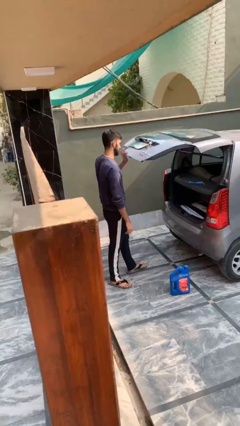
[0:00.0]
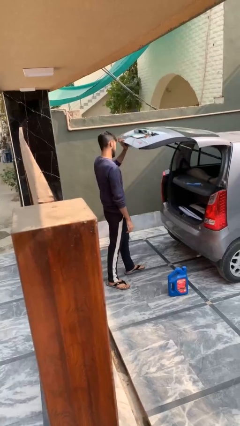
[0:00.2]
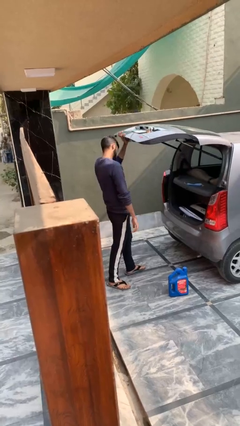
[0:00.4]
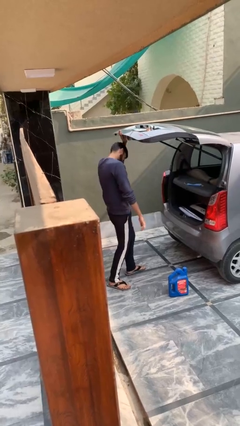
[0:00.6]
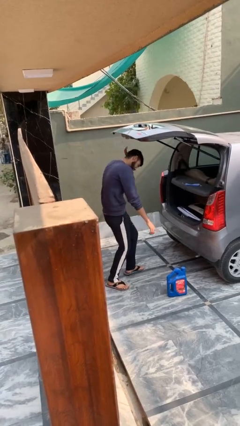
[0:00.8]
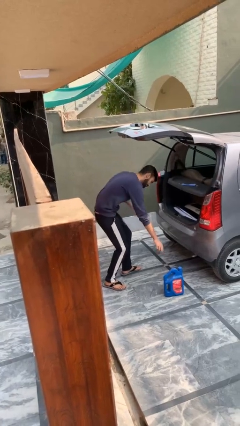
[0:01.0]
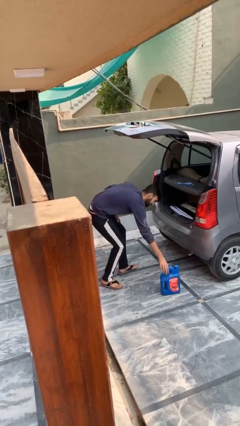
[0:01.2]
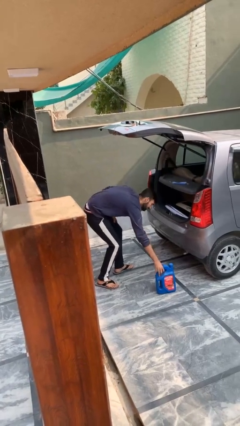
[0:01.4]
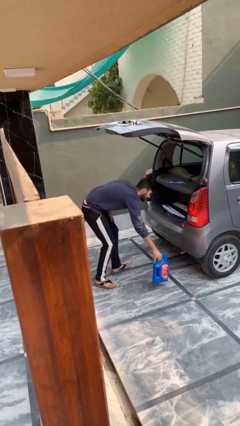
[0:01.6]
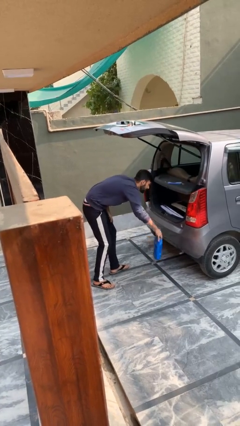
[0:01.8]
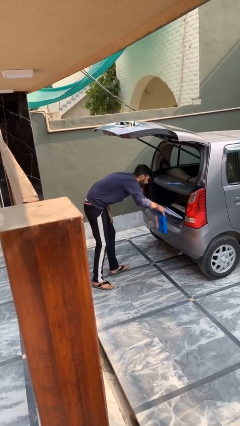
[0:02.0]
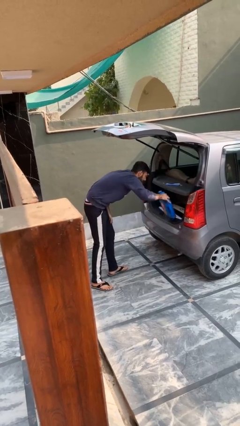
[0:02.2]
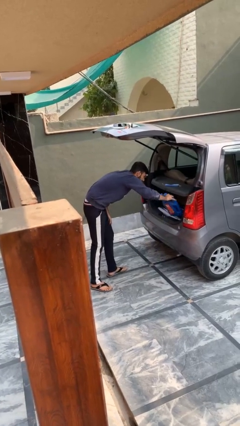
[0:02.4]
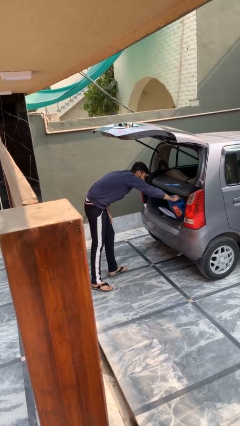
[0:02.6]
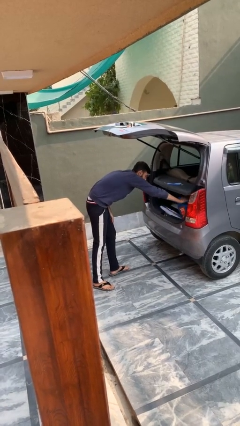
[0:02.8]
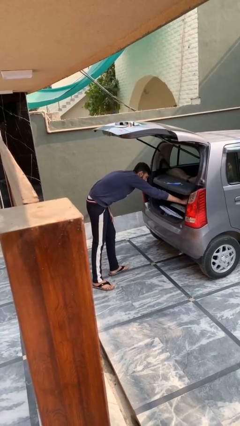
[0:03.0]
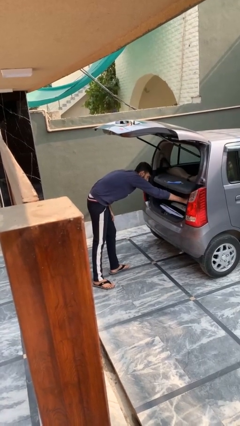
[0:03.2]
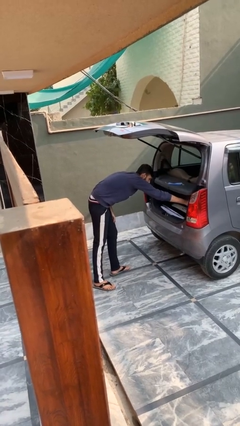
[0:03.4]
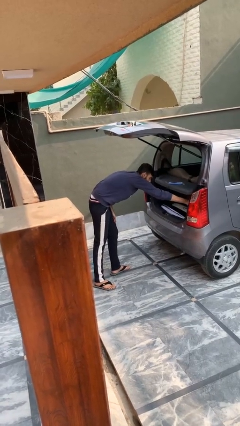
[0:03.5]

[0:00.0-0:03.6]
person loads car

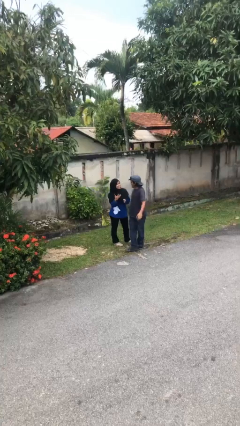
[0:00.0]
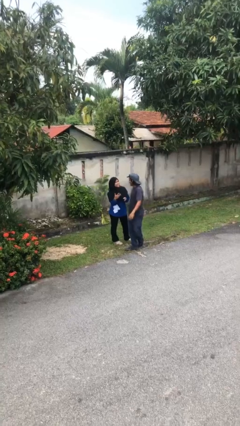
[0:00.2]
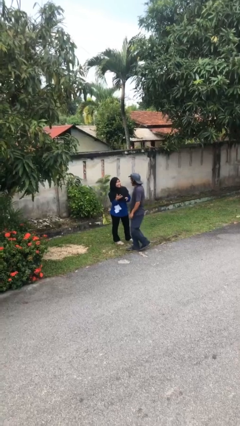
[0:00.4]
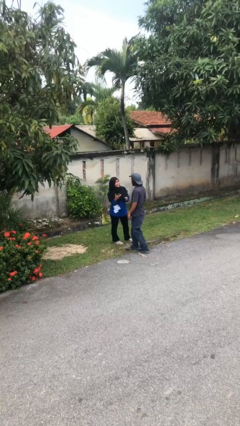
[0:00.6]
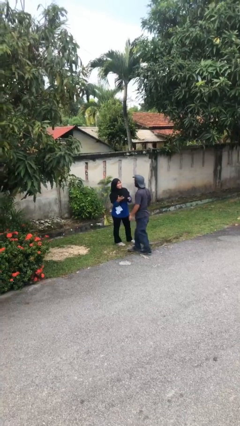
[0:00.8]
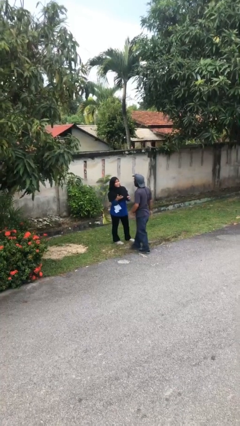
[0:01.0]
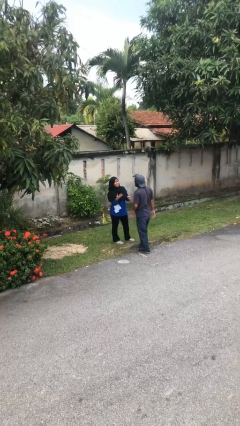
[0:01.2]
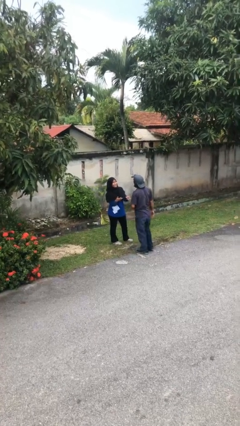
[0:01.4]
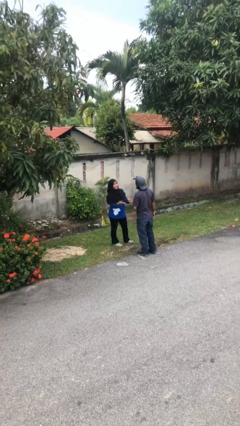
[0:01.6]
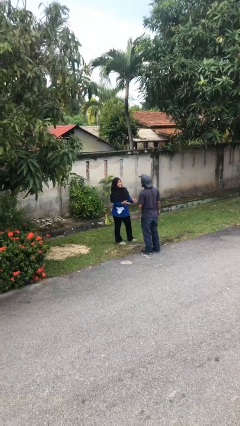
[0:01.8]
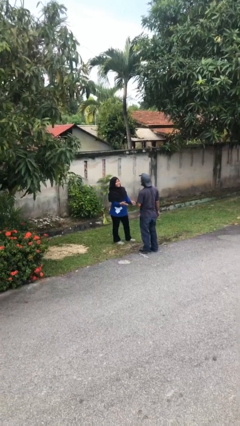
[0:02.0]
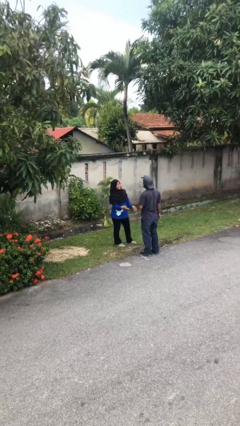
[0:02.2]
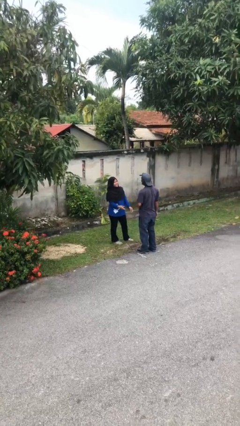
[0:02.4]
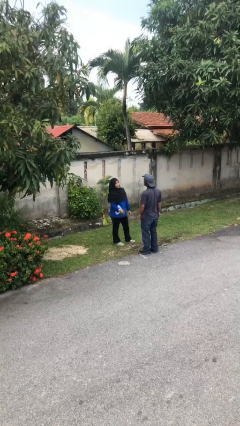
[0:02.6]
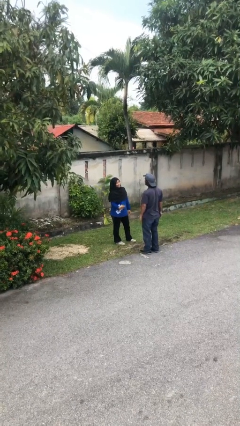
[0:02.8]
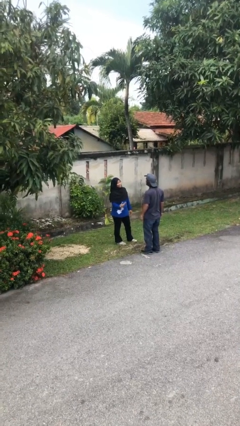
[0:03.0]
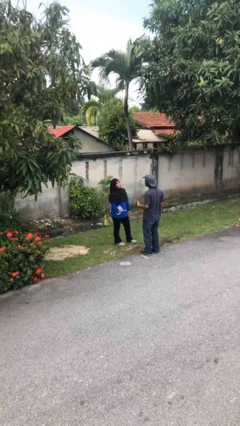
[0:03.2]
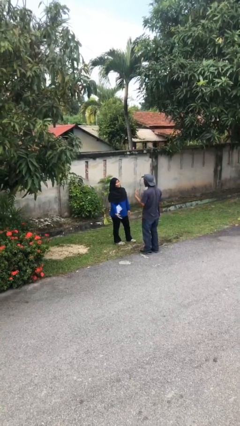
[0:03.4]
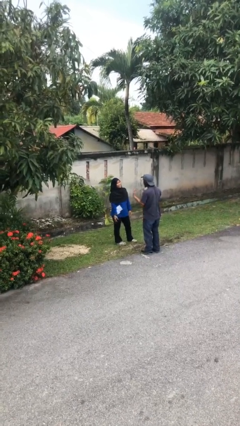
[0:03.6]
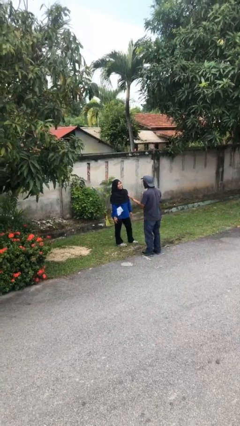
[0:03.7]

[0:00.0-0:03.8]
person talks to person

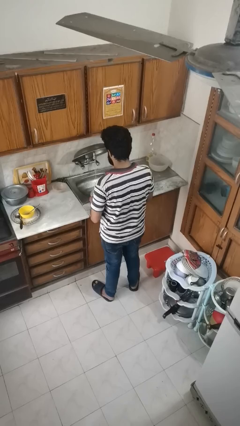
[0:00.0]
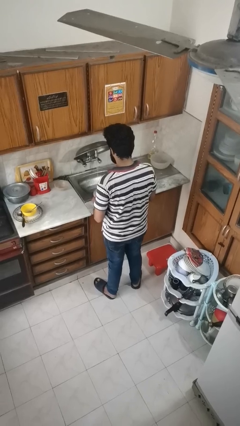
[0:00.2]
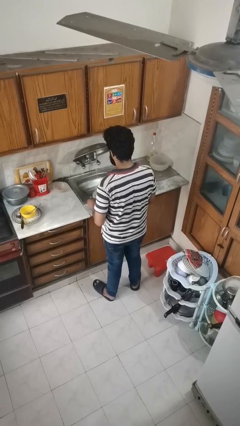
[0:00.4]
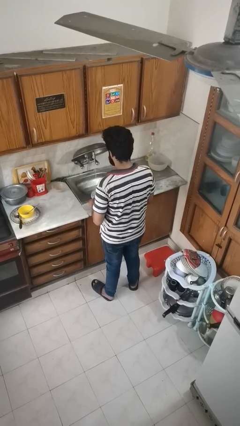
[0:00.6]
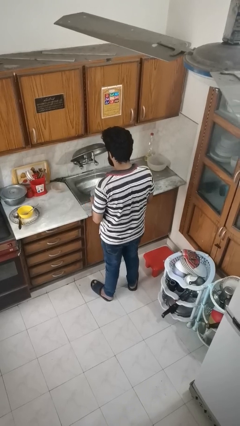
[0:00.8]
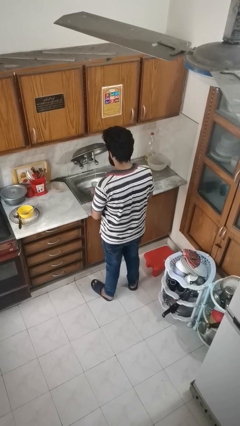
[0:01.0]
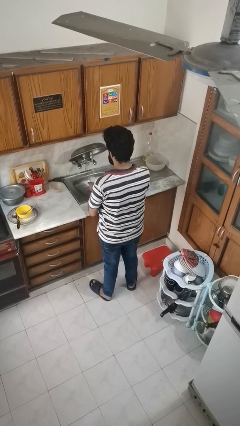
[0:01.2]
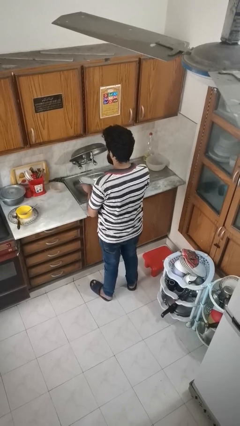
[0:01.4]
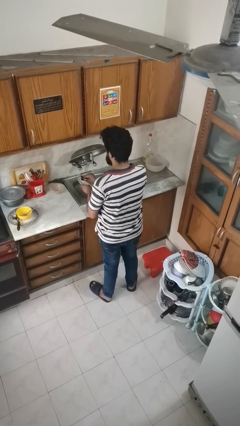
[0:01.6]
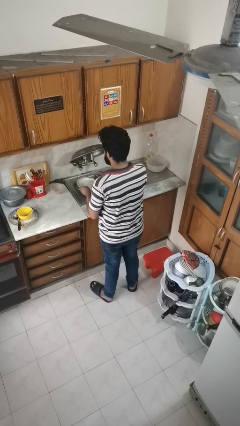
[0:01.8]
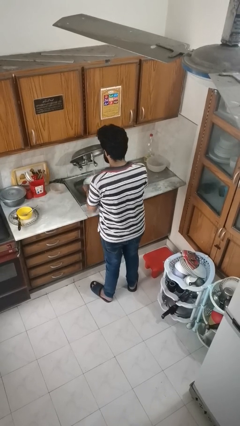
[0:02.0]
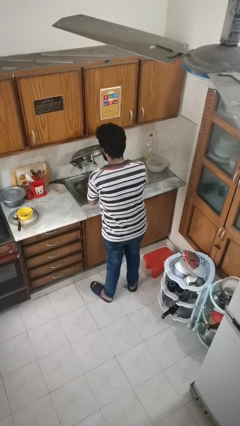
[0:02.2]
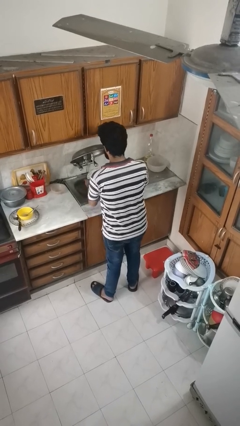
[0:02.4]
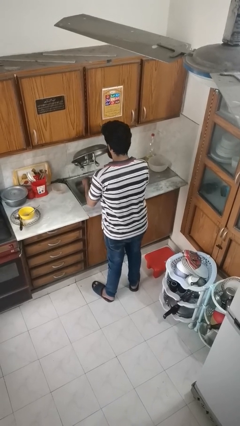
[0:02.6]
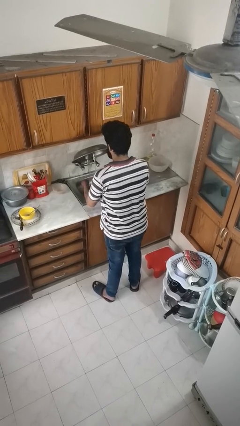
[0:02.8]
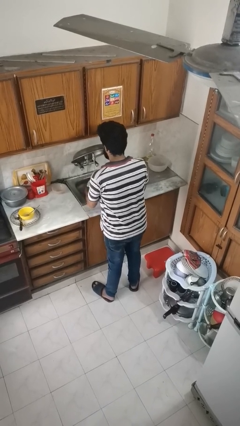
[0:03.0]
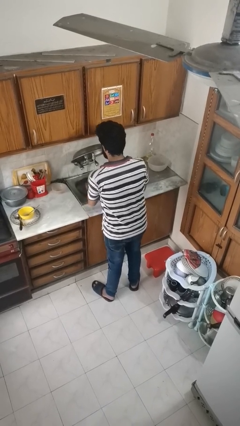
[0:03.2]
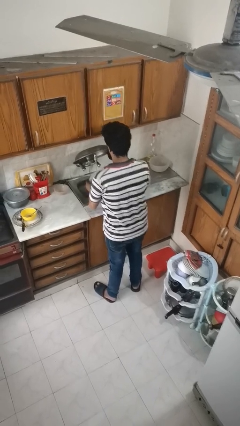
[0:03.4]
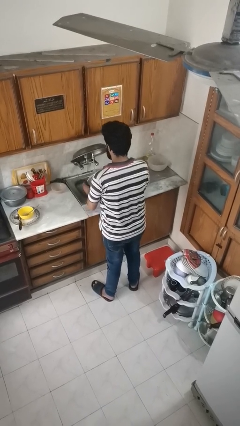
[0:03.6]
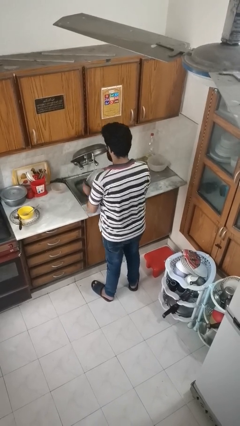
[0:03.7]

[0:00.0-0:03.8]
person washes dish

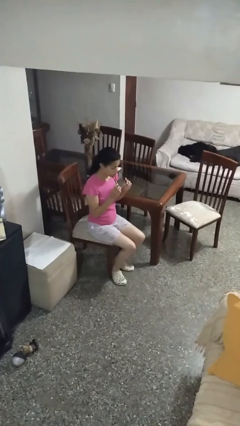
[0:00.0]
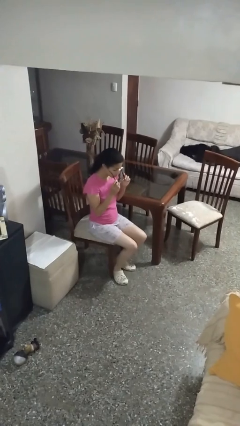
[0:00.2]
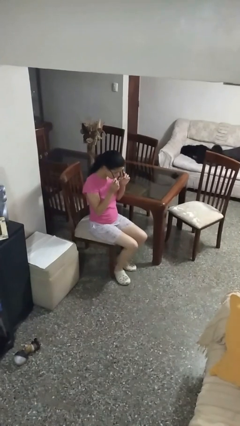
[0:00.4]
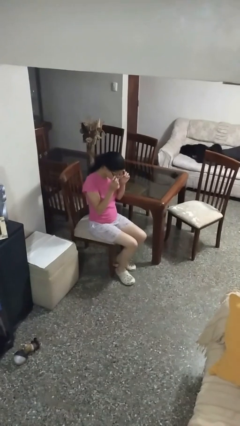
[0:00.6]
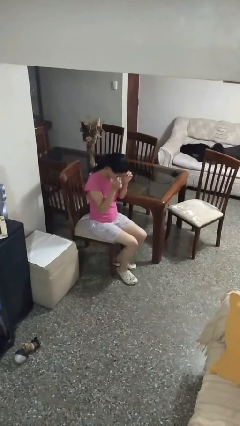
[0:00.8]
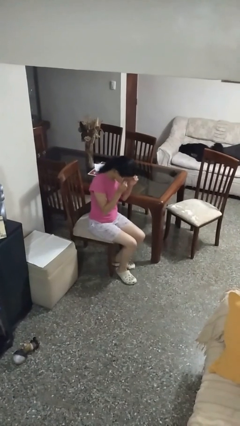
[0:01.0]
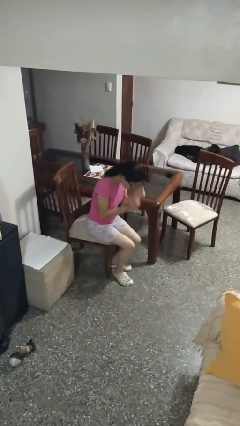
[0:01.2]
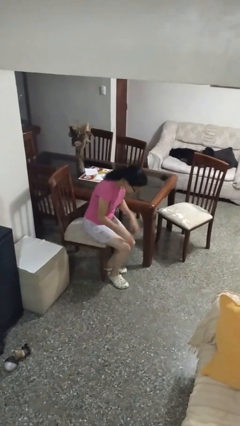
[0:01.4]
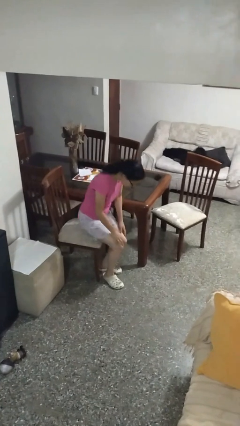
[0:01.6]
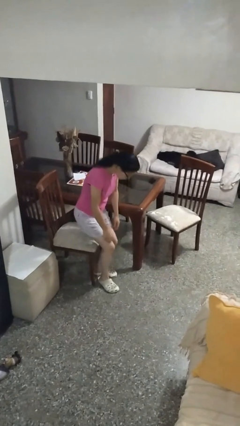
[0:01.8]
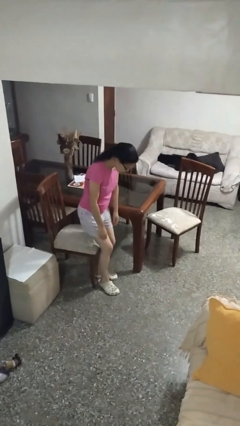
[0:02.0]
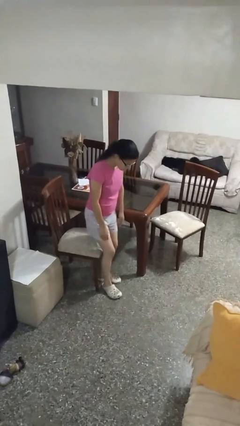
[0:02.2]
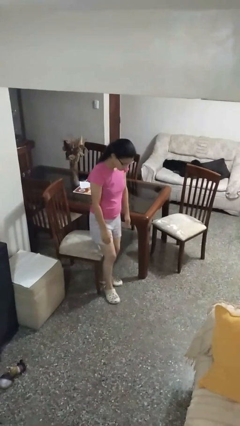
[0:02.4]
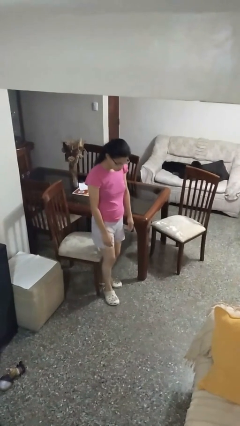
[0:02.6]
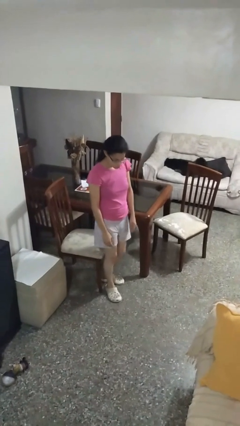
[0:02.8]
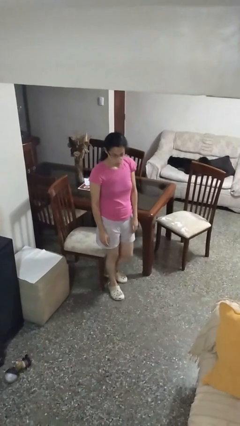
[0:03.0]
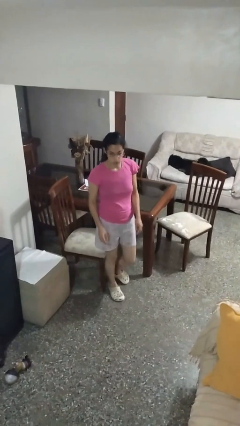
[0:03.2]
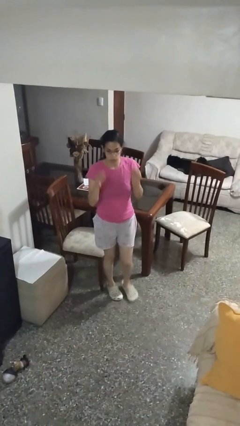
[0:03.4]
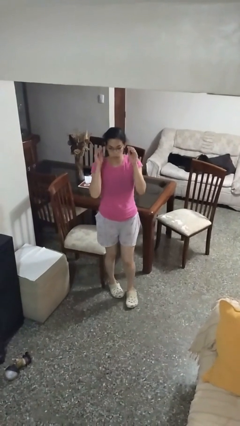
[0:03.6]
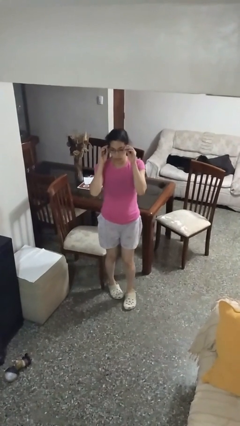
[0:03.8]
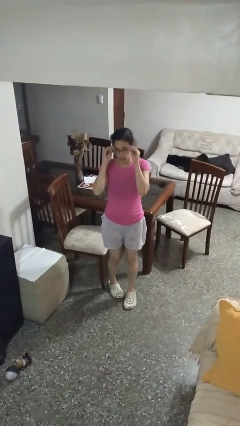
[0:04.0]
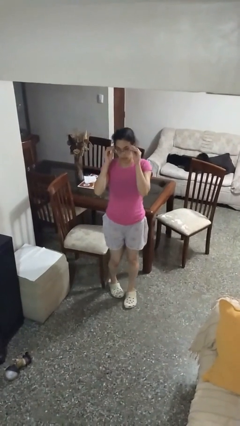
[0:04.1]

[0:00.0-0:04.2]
person puts on glasses

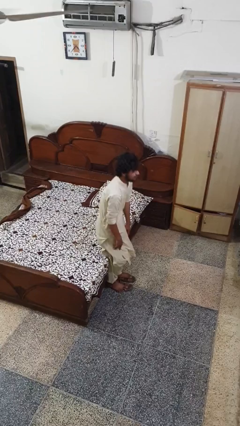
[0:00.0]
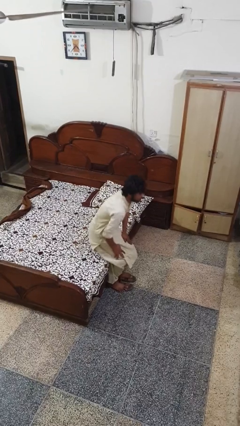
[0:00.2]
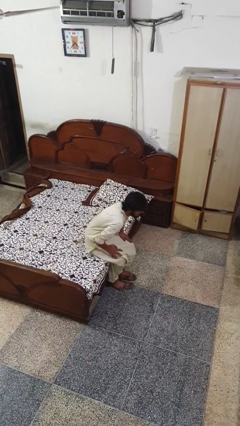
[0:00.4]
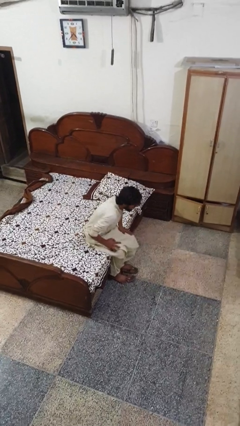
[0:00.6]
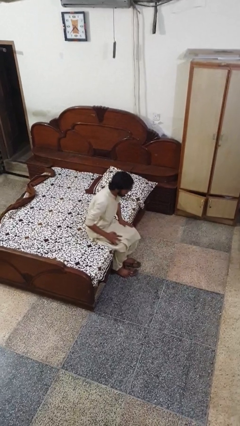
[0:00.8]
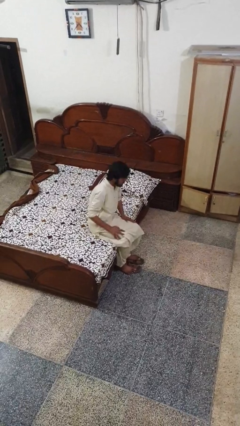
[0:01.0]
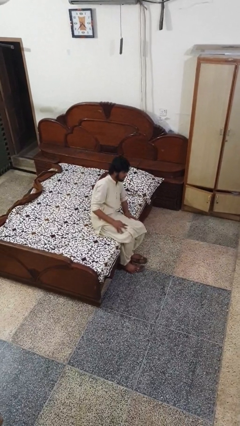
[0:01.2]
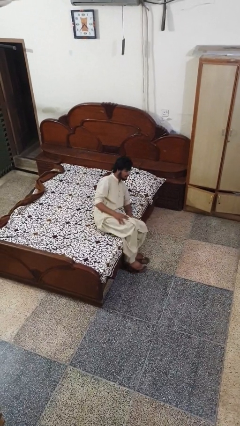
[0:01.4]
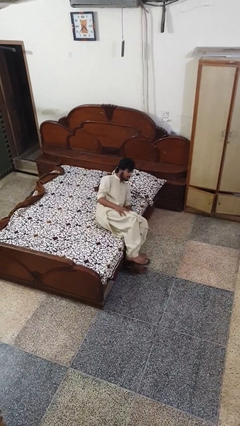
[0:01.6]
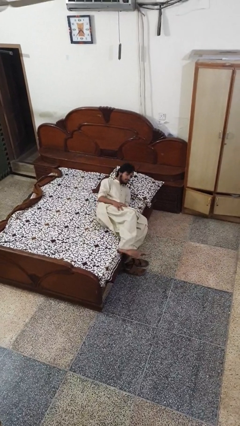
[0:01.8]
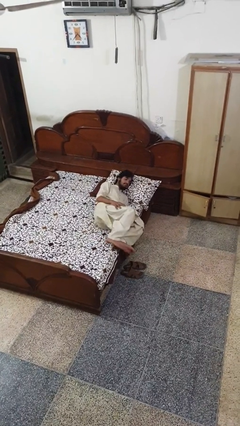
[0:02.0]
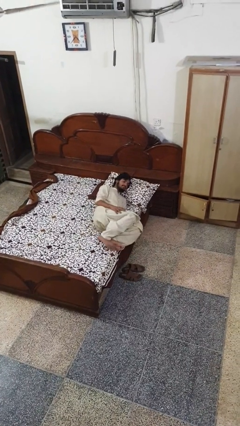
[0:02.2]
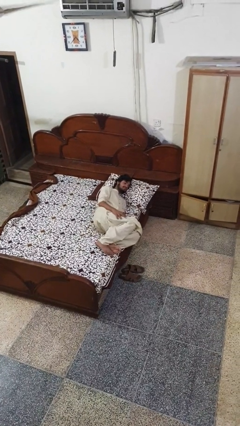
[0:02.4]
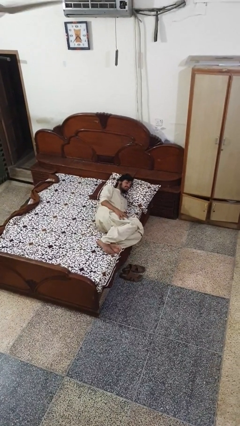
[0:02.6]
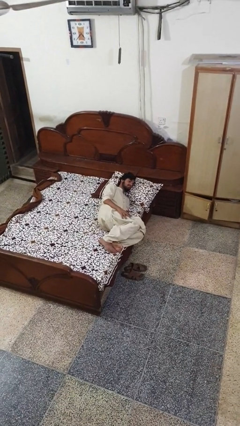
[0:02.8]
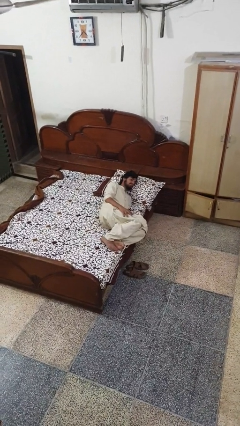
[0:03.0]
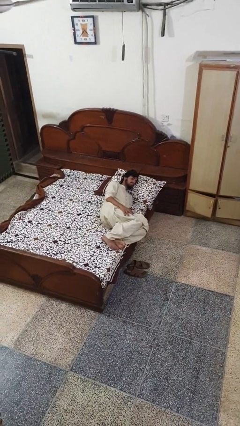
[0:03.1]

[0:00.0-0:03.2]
person lies down on bed
